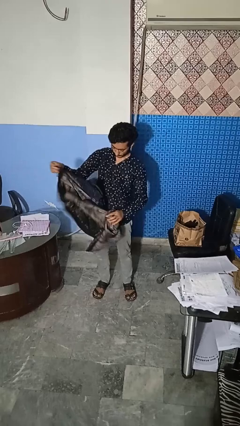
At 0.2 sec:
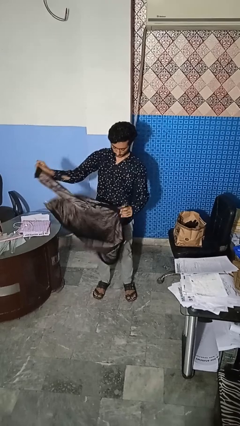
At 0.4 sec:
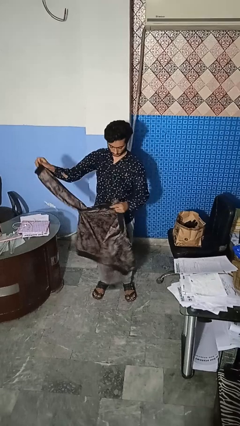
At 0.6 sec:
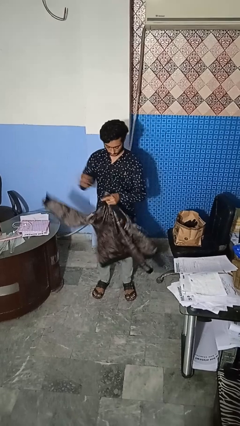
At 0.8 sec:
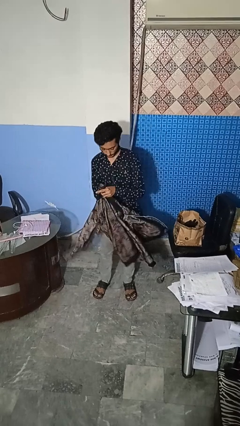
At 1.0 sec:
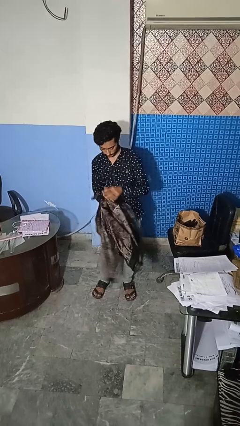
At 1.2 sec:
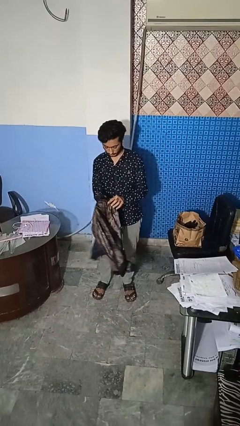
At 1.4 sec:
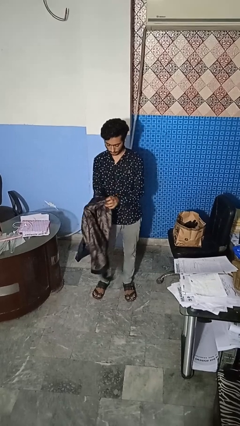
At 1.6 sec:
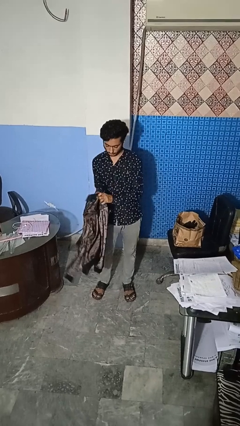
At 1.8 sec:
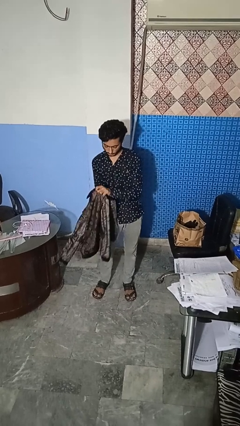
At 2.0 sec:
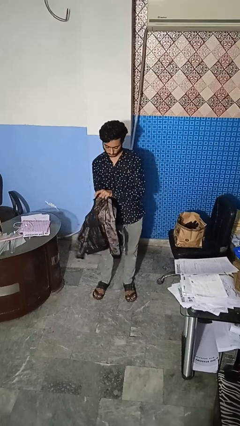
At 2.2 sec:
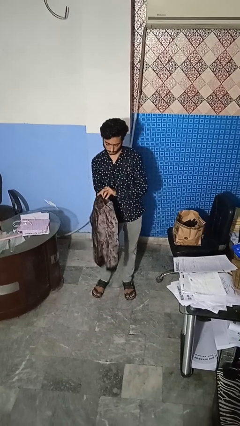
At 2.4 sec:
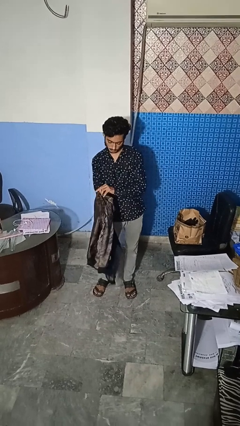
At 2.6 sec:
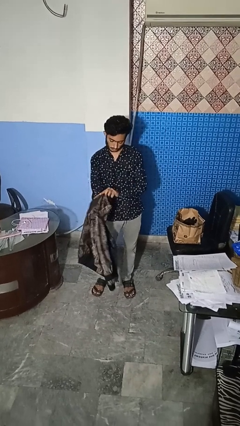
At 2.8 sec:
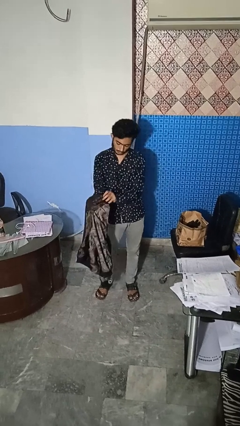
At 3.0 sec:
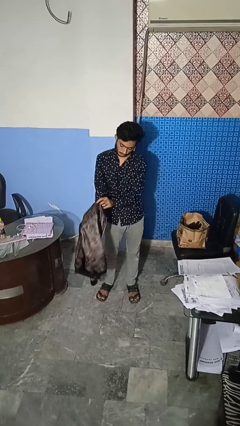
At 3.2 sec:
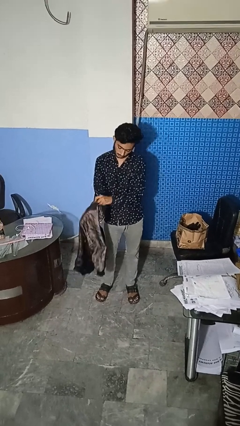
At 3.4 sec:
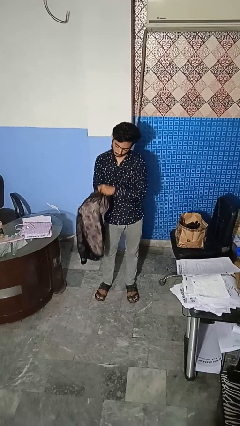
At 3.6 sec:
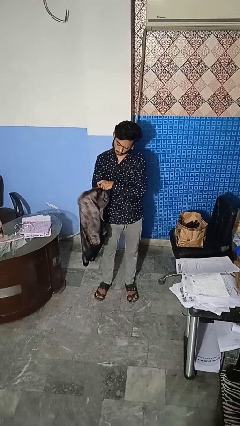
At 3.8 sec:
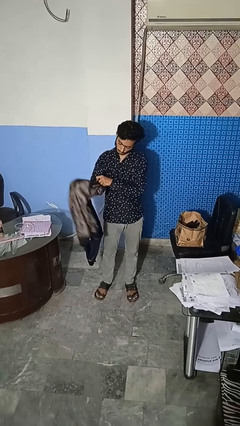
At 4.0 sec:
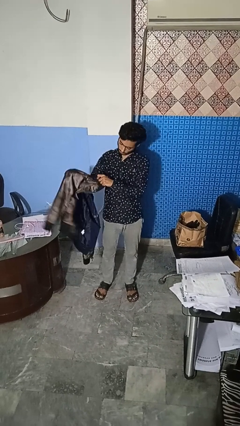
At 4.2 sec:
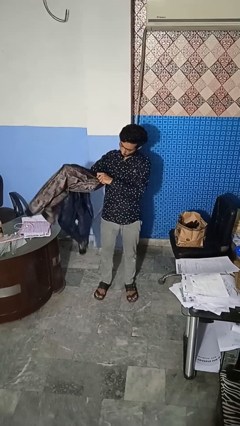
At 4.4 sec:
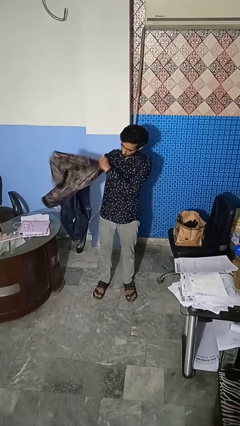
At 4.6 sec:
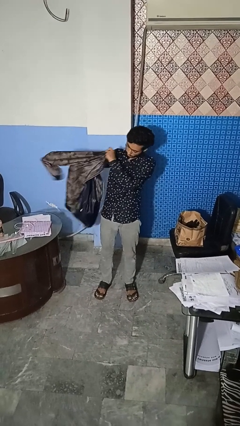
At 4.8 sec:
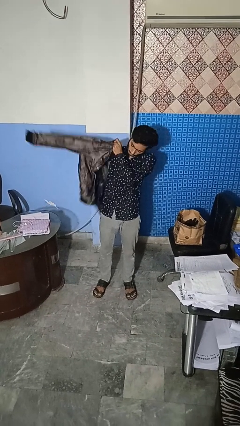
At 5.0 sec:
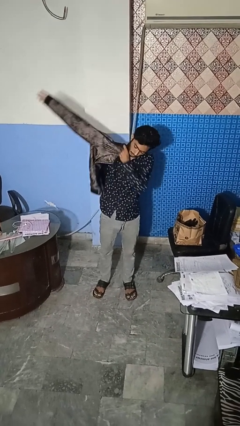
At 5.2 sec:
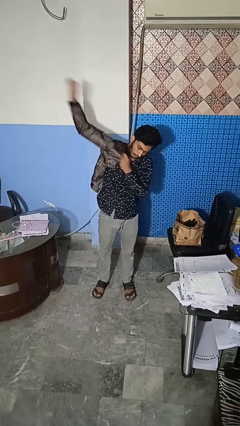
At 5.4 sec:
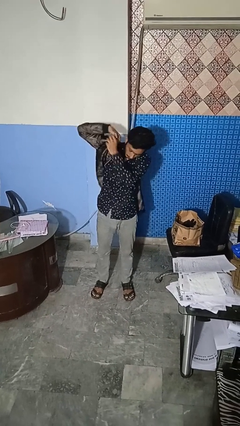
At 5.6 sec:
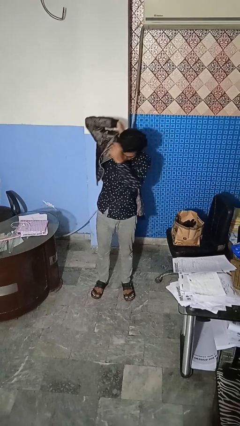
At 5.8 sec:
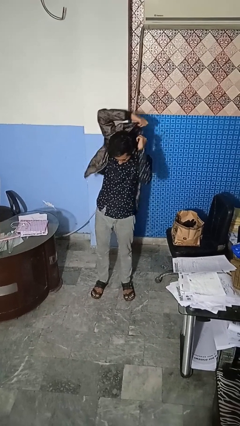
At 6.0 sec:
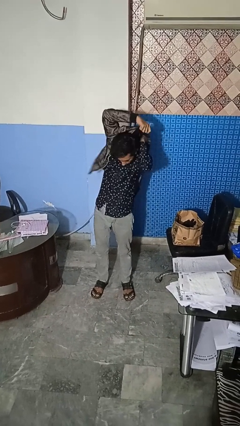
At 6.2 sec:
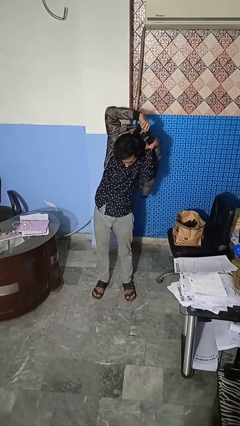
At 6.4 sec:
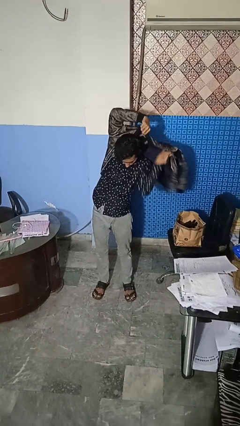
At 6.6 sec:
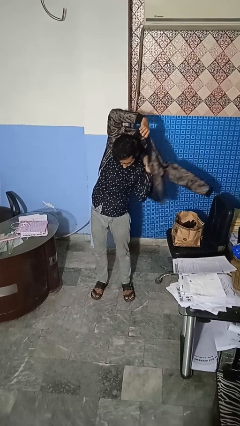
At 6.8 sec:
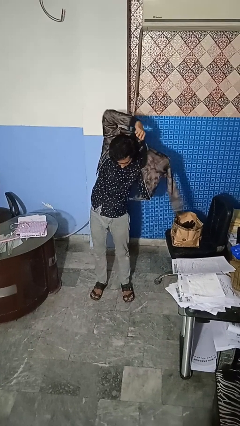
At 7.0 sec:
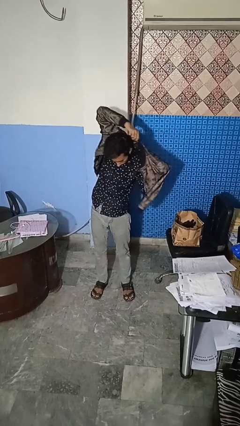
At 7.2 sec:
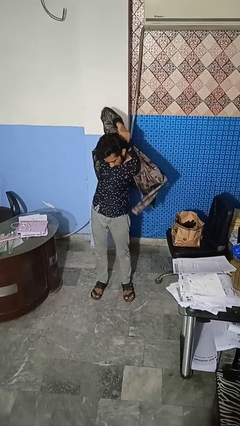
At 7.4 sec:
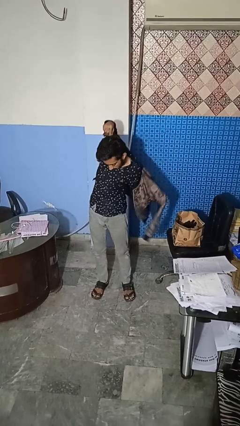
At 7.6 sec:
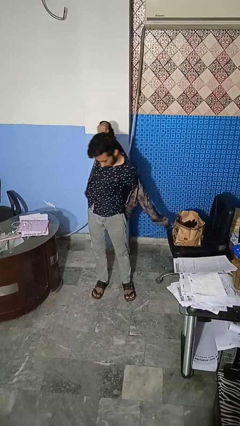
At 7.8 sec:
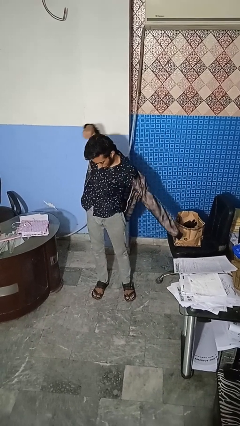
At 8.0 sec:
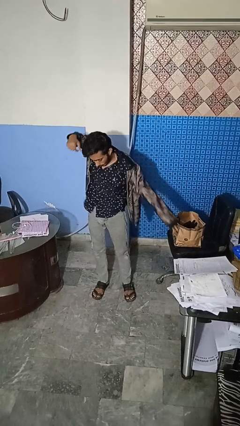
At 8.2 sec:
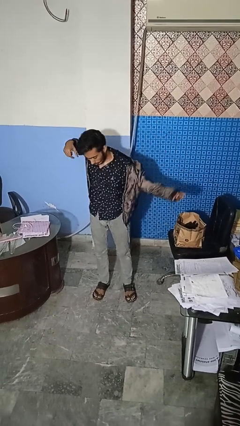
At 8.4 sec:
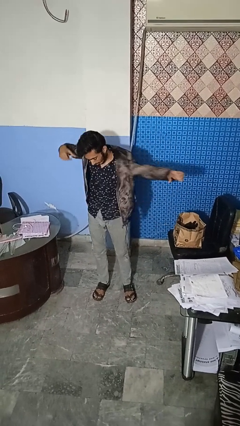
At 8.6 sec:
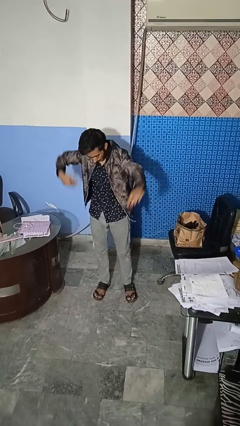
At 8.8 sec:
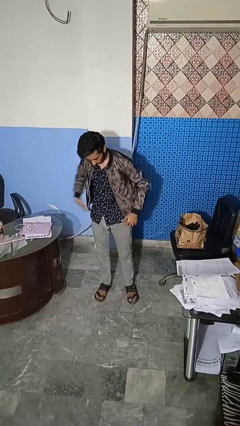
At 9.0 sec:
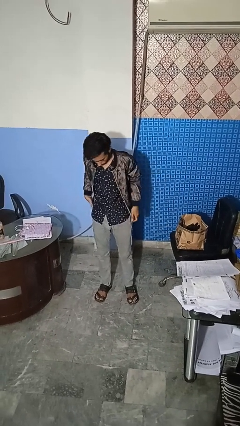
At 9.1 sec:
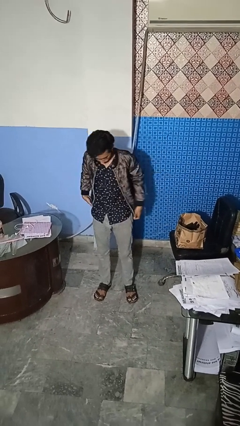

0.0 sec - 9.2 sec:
person puts on jacket

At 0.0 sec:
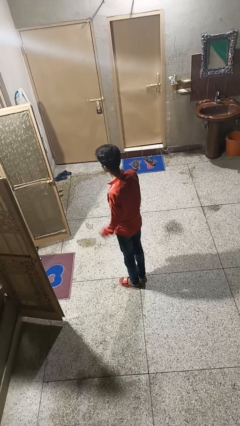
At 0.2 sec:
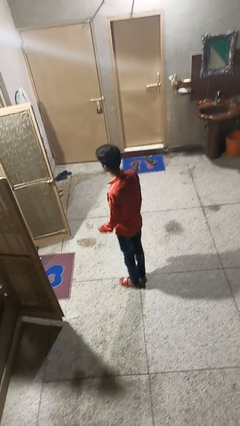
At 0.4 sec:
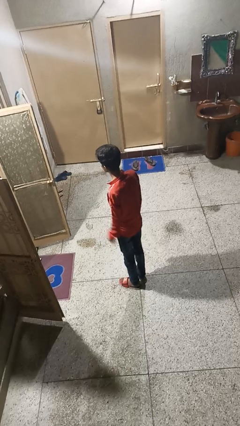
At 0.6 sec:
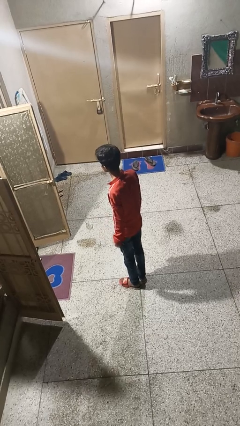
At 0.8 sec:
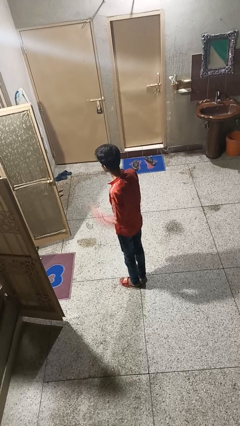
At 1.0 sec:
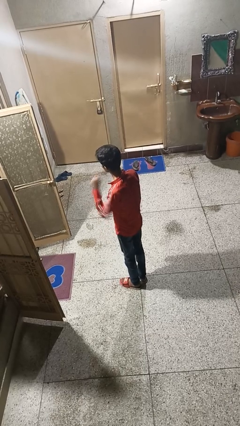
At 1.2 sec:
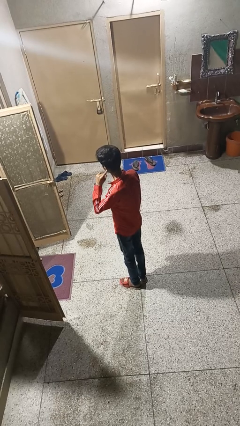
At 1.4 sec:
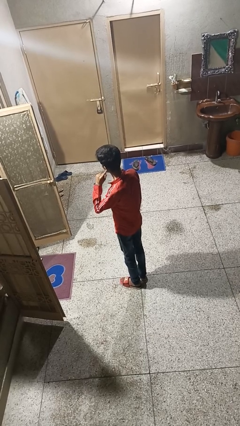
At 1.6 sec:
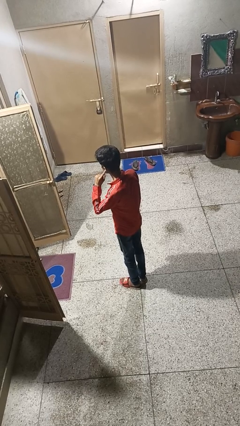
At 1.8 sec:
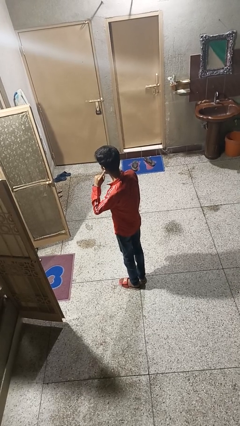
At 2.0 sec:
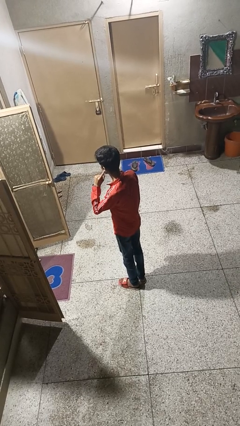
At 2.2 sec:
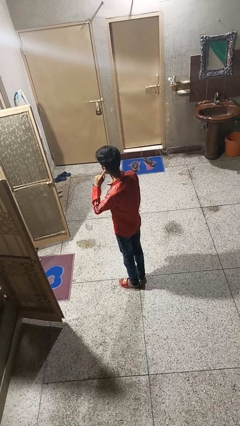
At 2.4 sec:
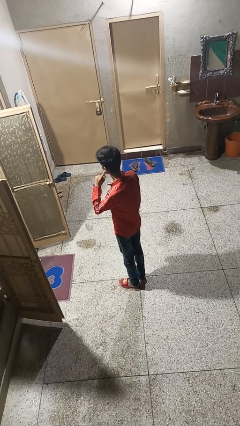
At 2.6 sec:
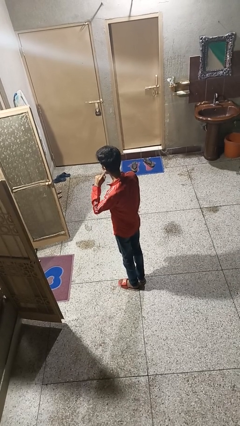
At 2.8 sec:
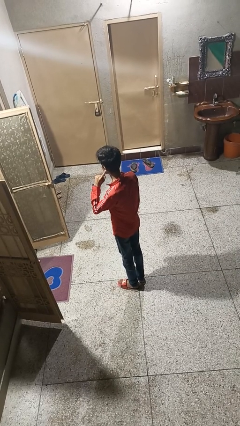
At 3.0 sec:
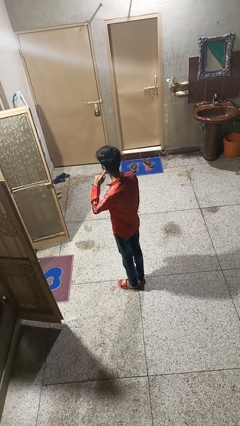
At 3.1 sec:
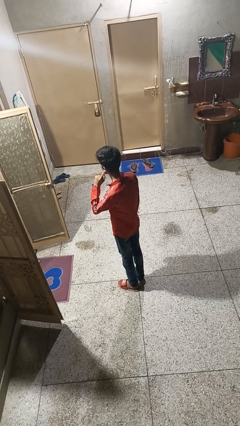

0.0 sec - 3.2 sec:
person gestures listen closely

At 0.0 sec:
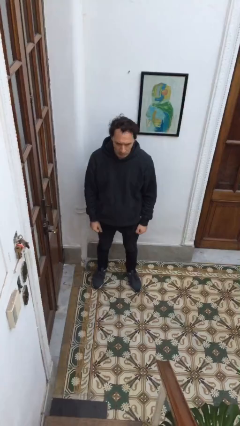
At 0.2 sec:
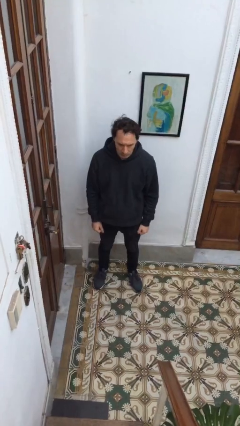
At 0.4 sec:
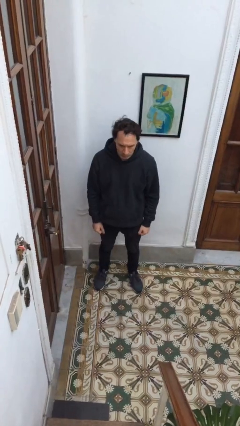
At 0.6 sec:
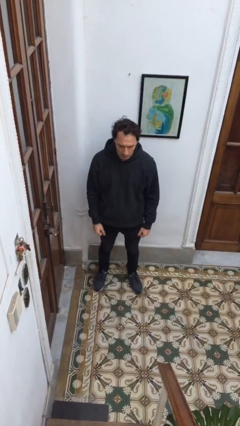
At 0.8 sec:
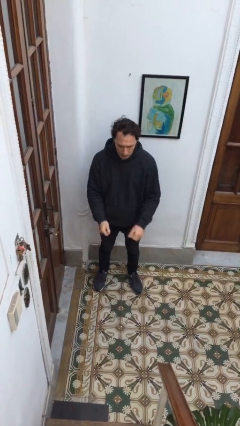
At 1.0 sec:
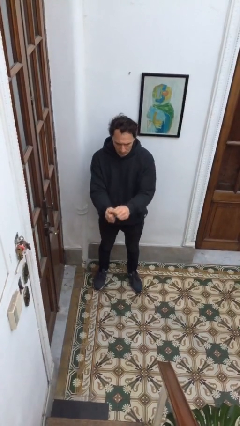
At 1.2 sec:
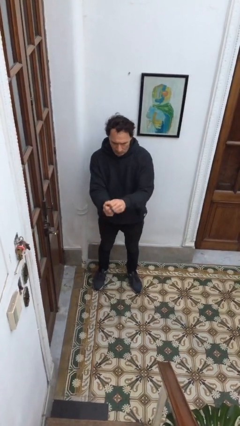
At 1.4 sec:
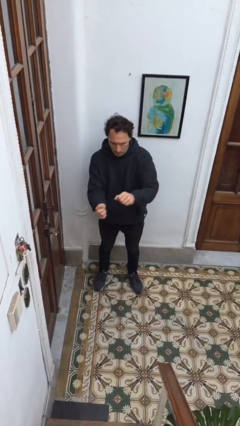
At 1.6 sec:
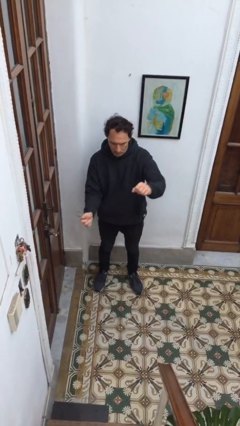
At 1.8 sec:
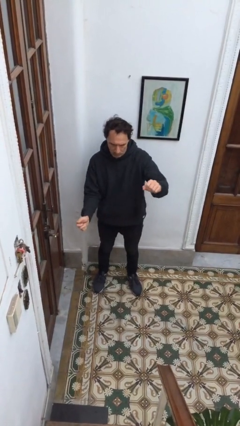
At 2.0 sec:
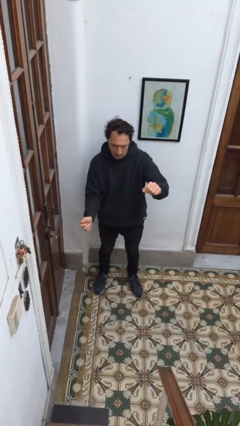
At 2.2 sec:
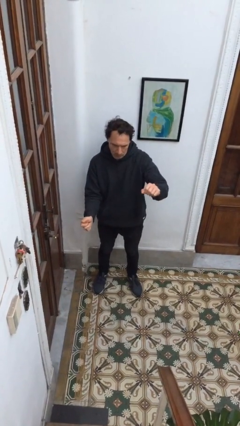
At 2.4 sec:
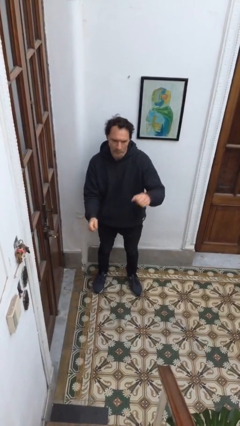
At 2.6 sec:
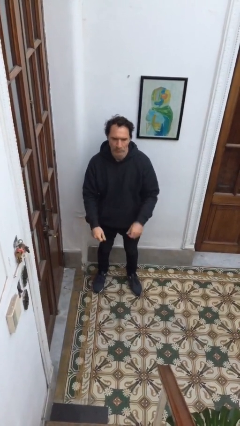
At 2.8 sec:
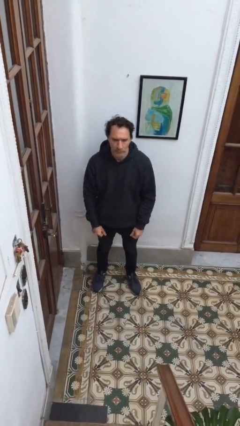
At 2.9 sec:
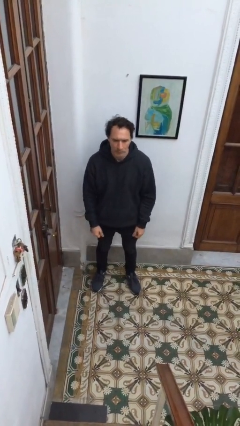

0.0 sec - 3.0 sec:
person gestures zoom in

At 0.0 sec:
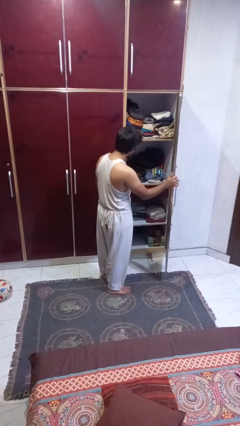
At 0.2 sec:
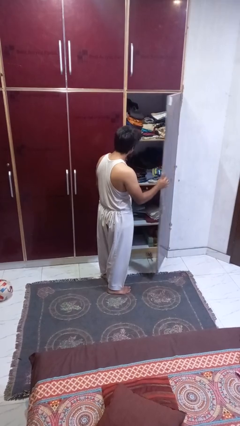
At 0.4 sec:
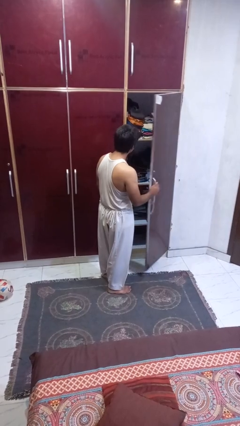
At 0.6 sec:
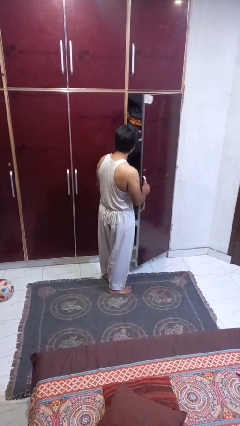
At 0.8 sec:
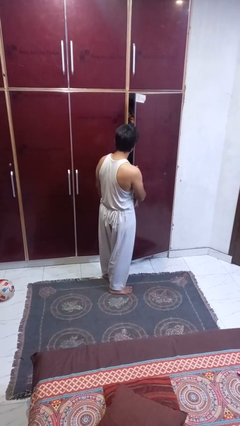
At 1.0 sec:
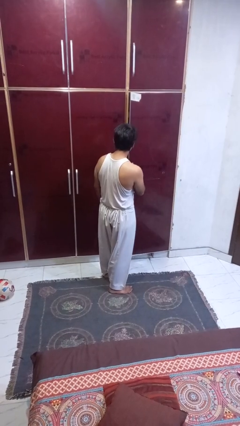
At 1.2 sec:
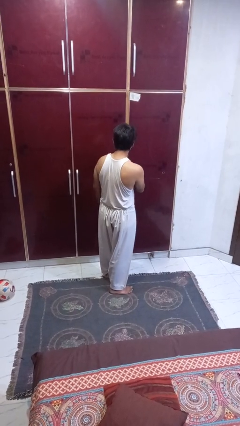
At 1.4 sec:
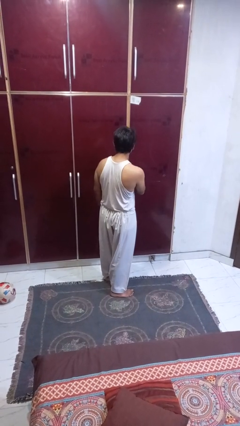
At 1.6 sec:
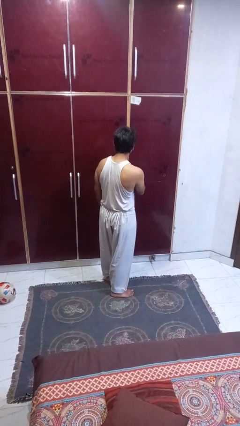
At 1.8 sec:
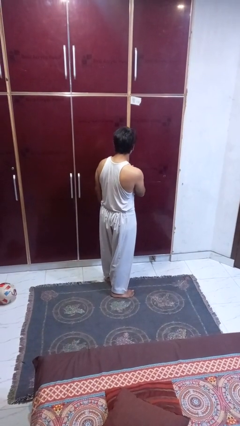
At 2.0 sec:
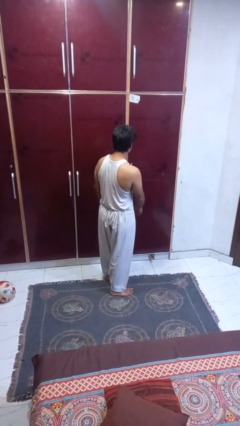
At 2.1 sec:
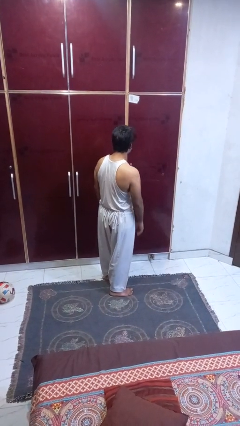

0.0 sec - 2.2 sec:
person closes closet door
